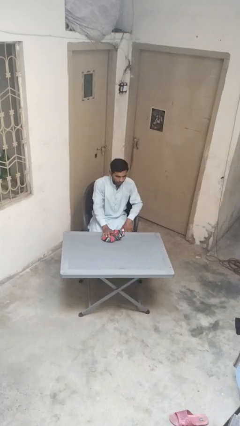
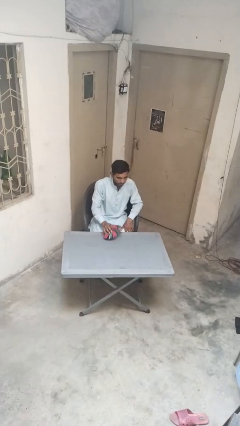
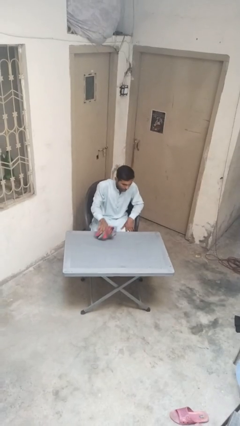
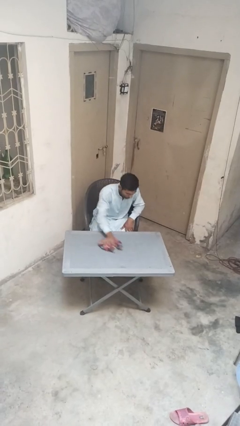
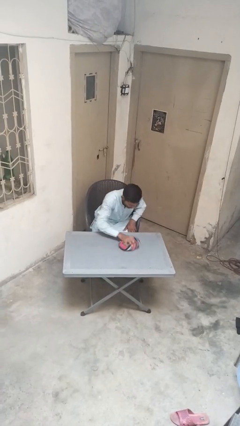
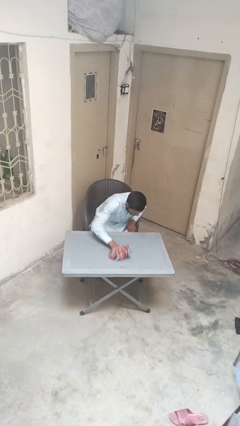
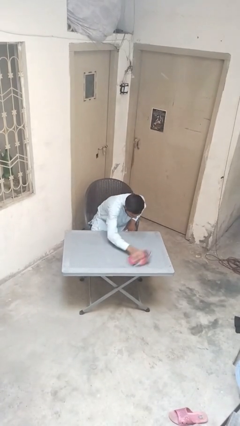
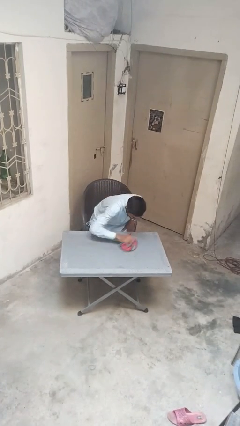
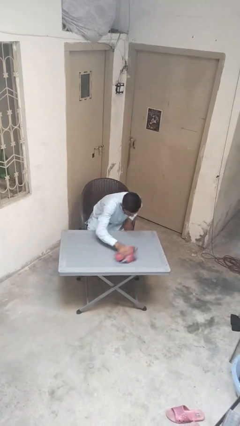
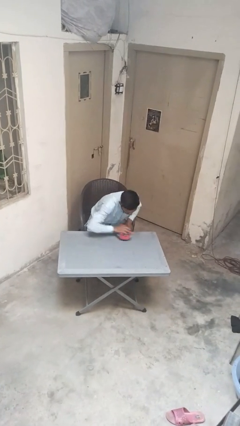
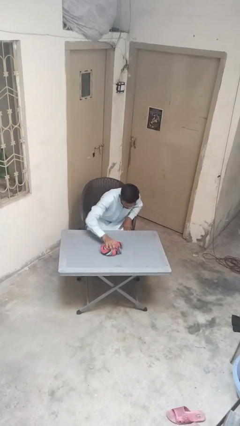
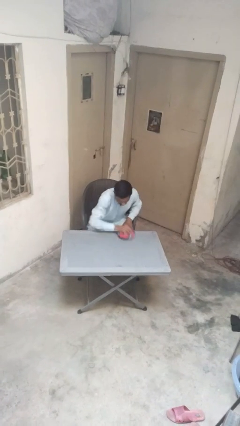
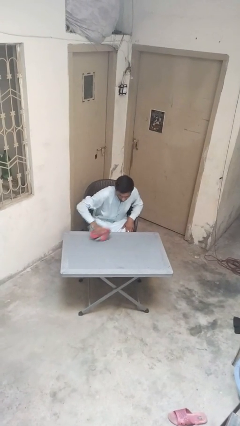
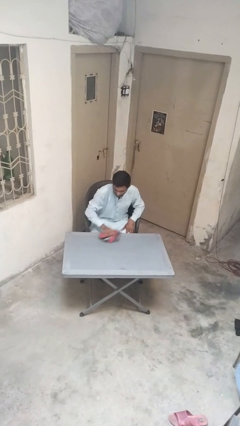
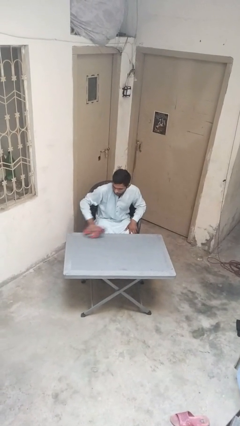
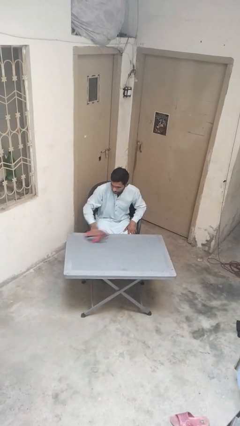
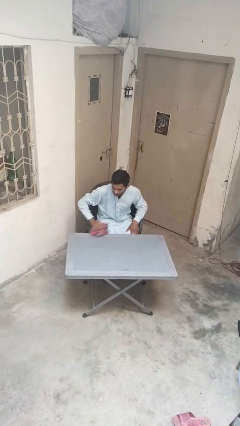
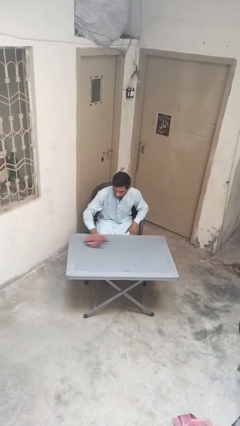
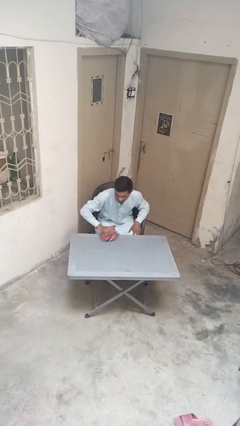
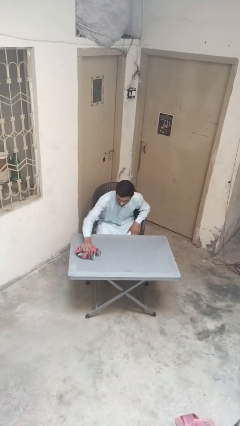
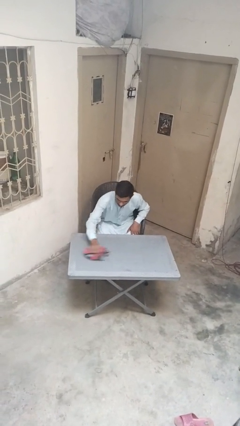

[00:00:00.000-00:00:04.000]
person cleans table with rag

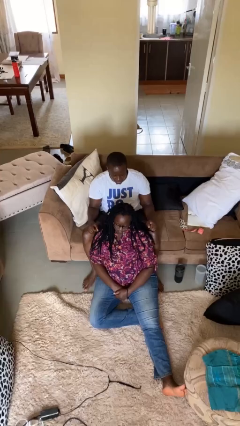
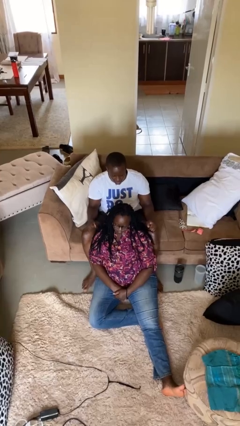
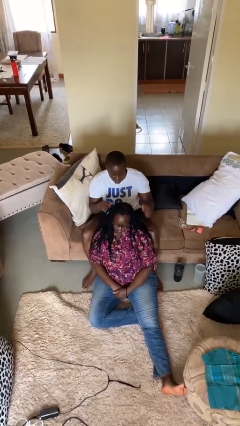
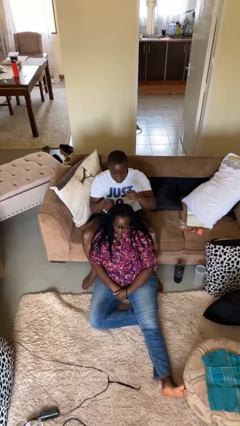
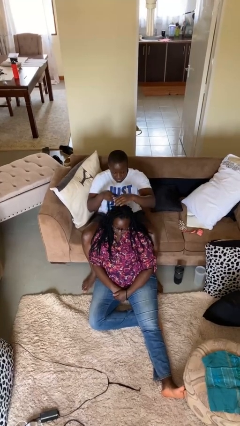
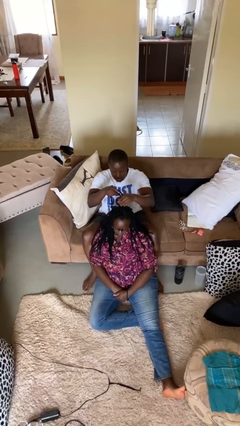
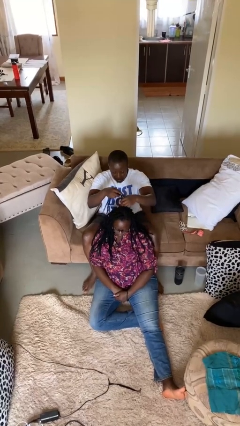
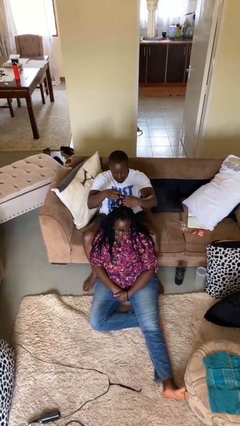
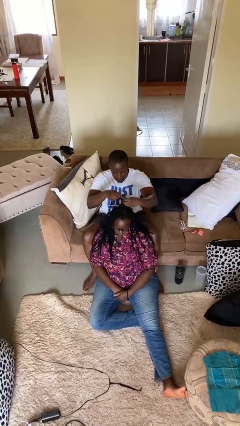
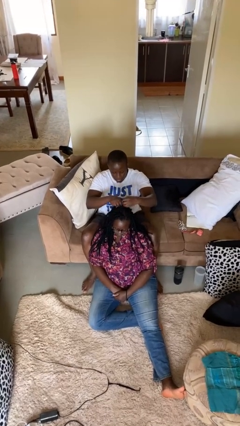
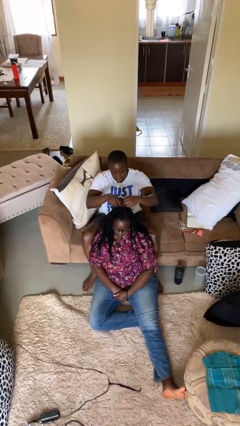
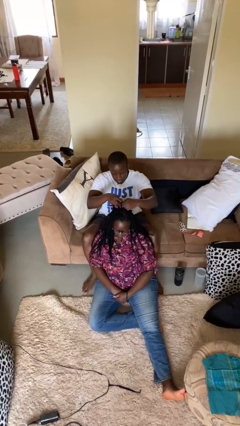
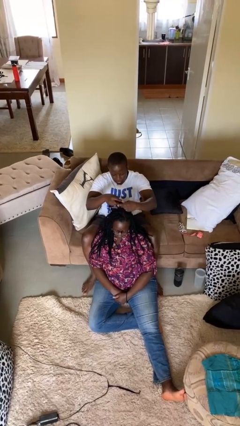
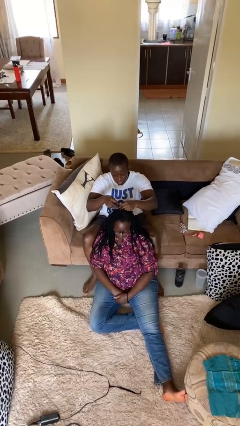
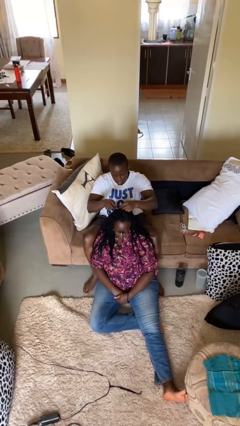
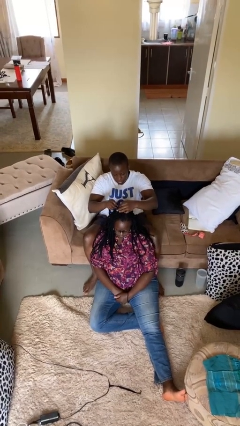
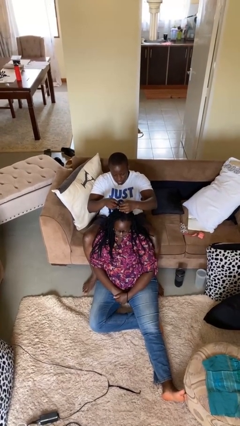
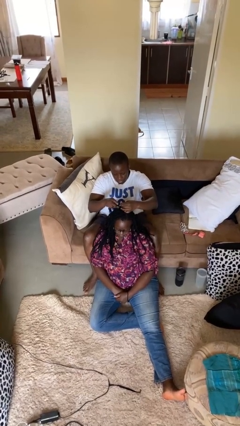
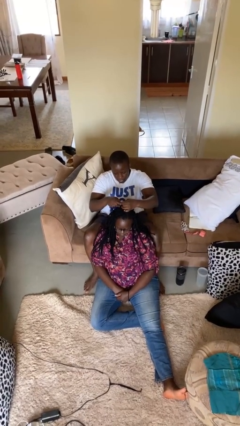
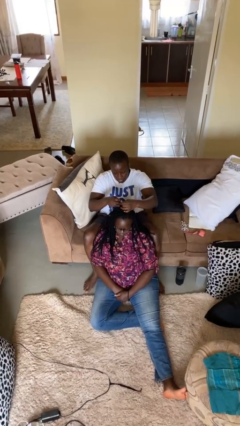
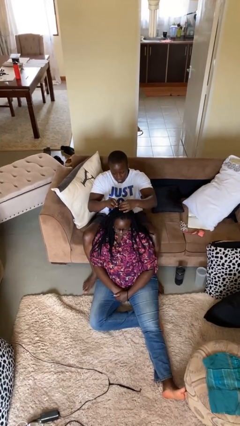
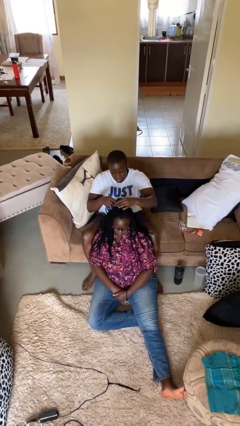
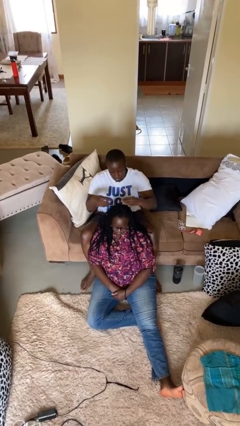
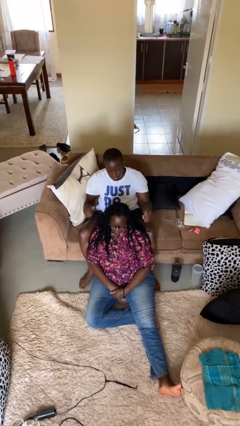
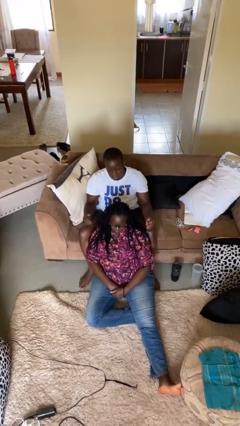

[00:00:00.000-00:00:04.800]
person braids hair of person

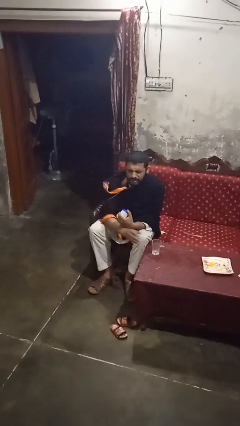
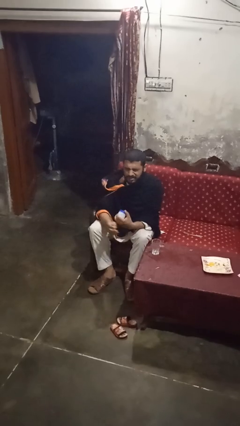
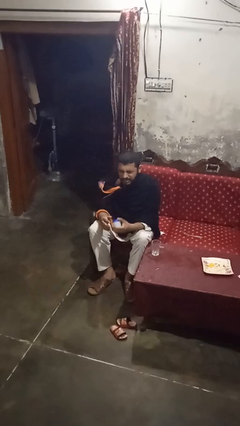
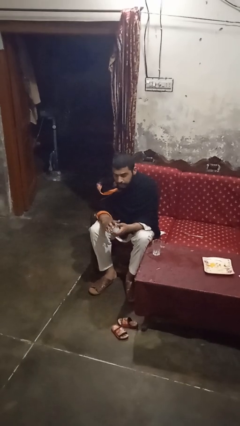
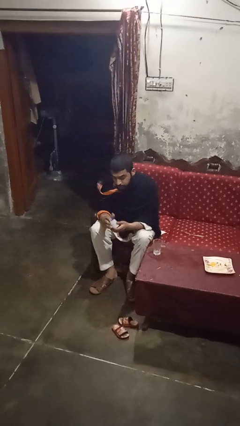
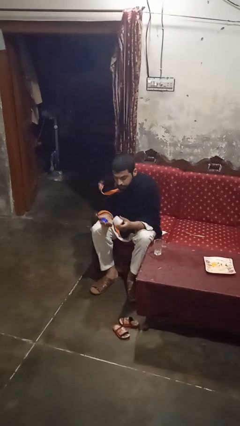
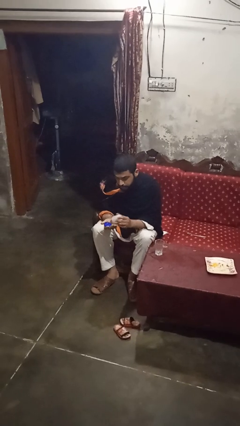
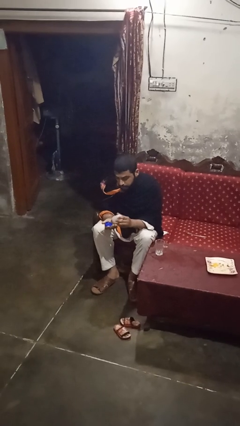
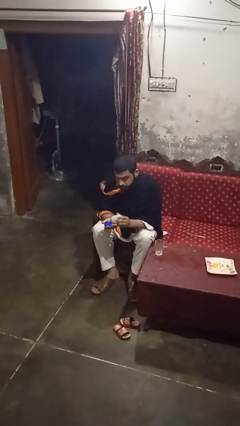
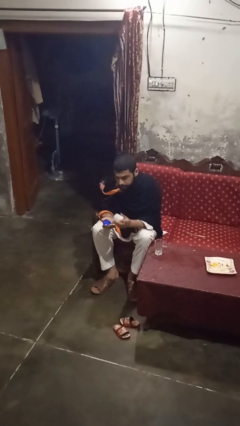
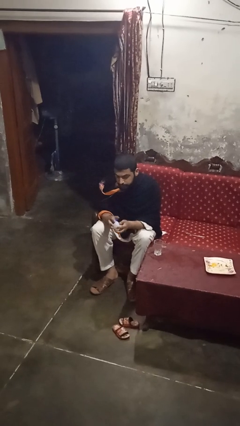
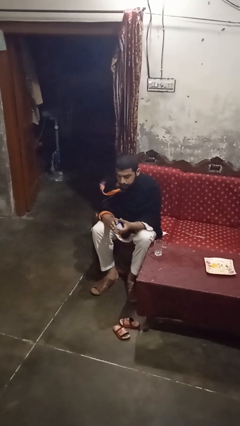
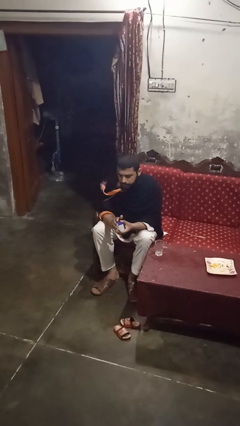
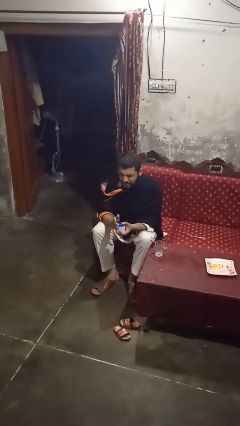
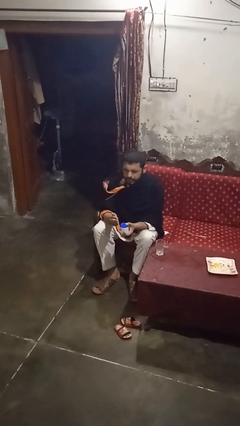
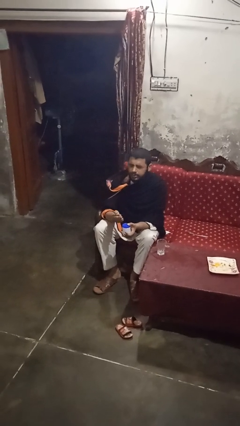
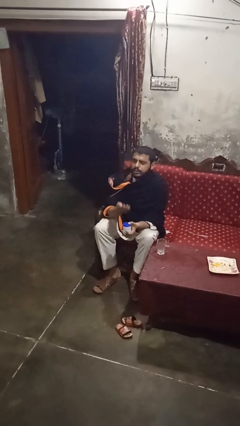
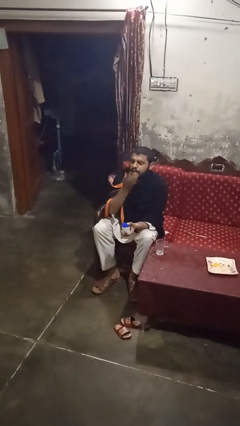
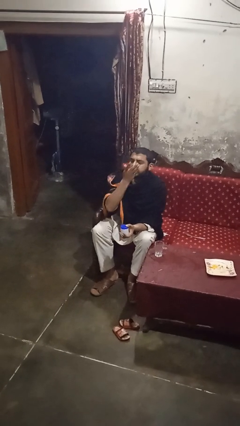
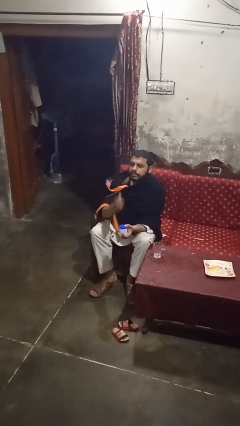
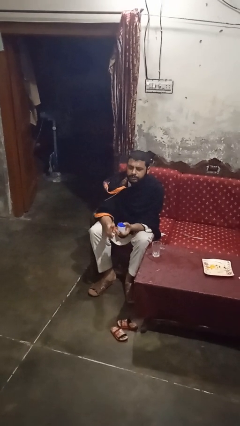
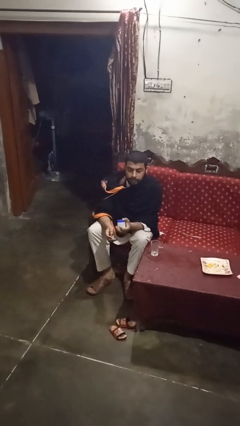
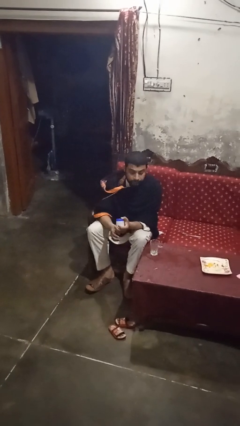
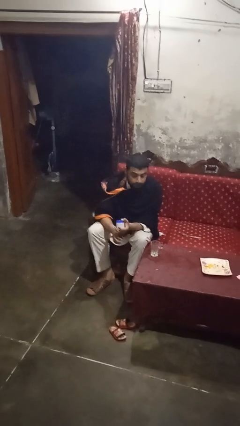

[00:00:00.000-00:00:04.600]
person takes medicine pills

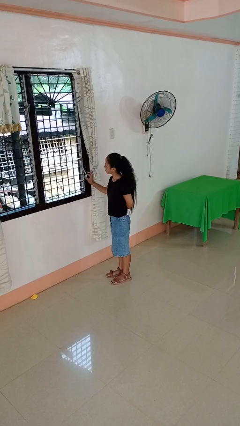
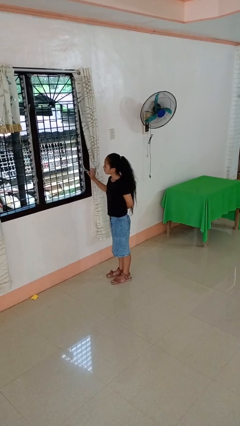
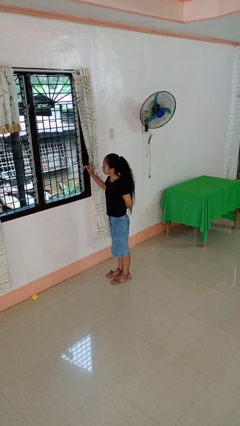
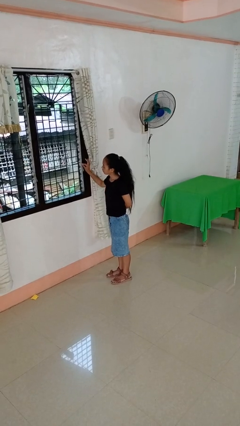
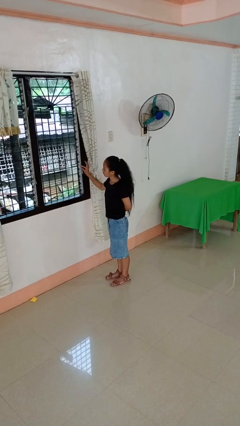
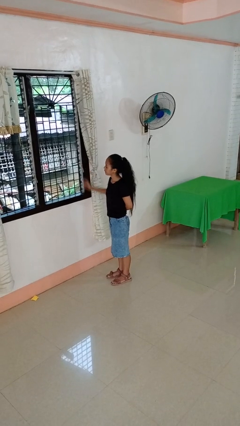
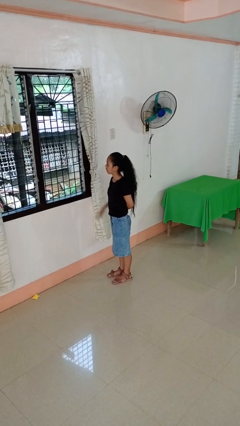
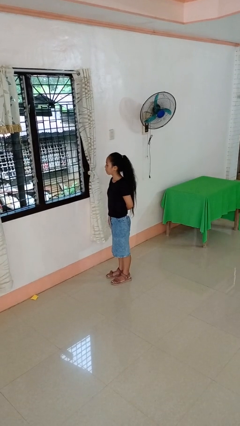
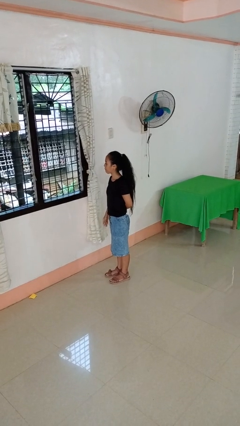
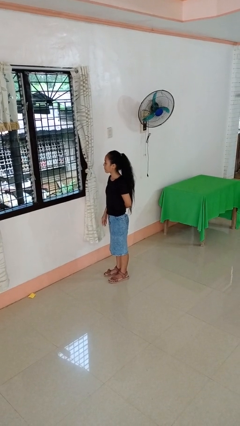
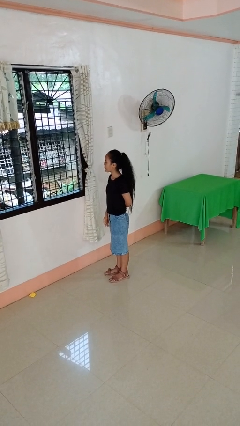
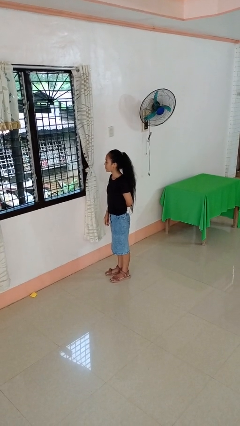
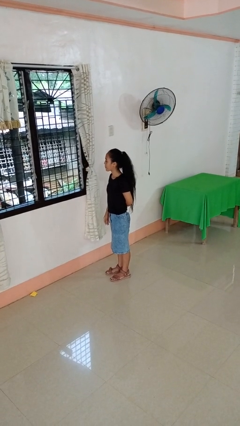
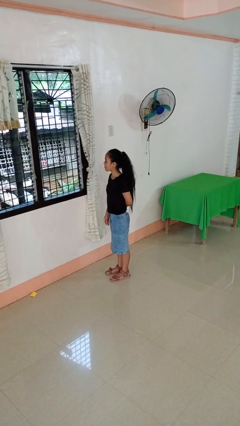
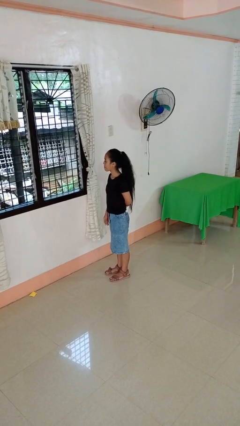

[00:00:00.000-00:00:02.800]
person closes home window

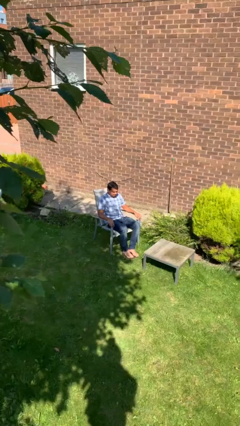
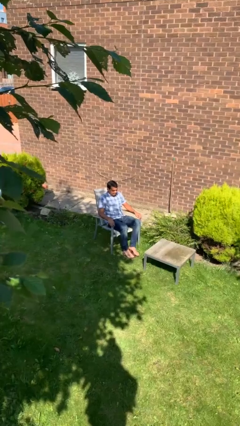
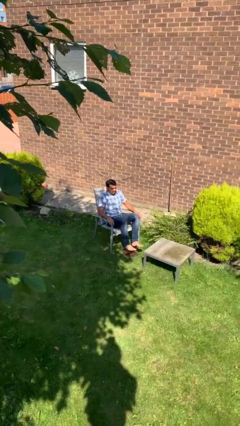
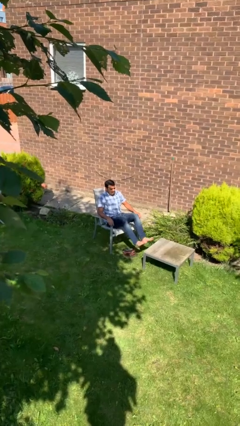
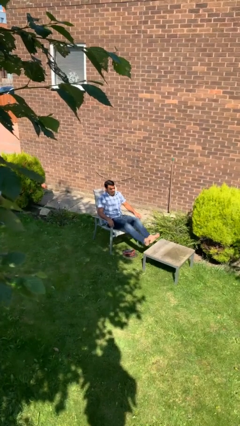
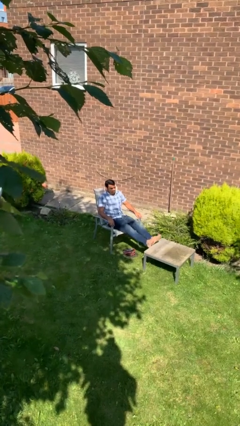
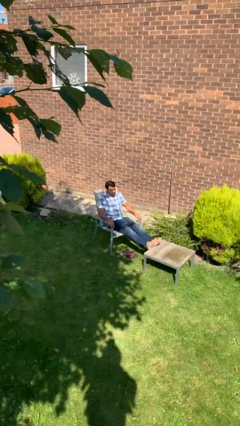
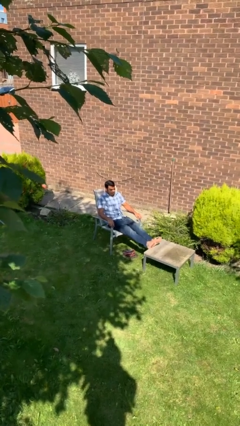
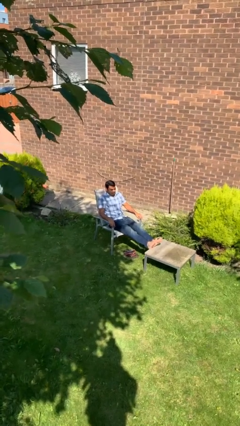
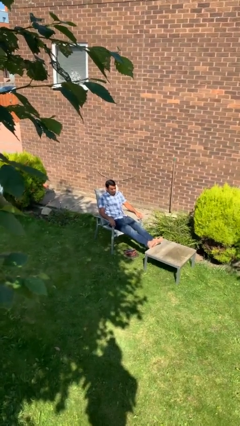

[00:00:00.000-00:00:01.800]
person puts feet up
